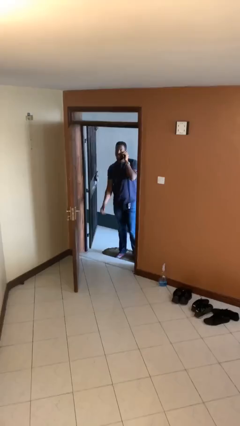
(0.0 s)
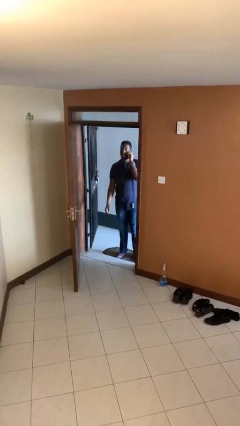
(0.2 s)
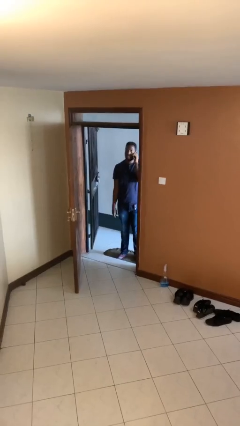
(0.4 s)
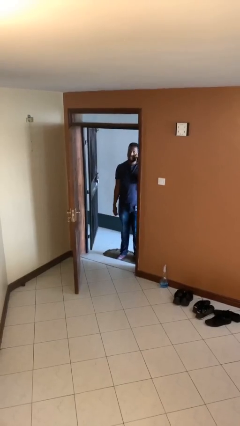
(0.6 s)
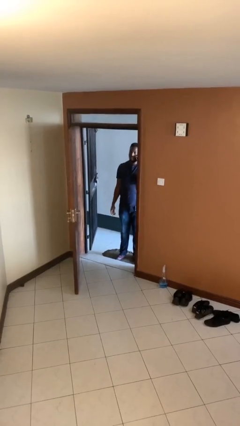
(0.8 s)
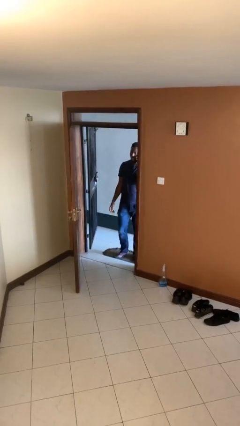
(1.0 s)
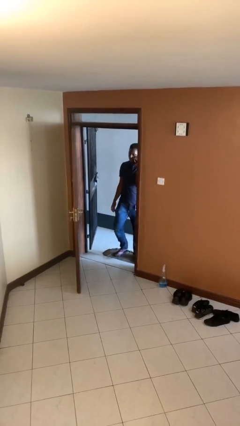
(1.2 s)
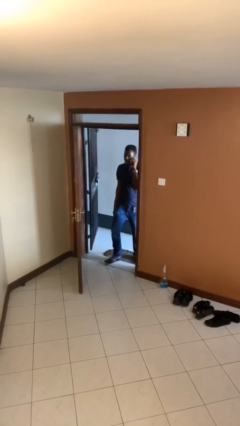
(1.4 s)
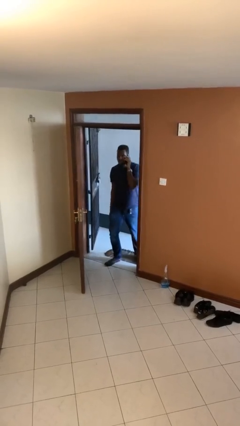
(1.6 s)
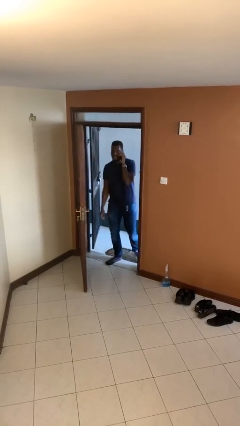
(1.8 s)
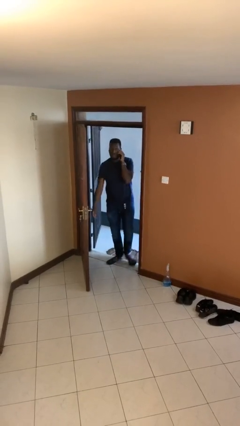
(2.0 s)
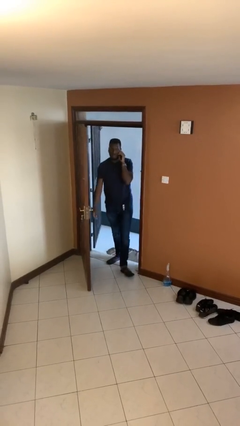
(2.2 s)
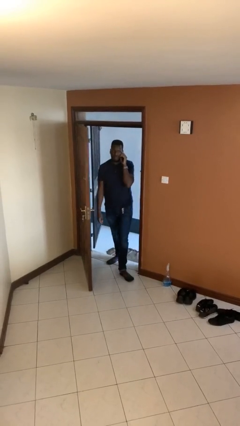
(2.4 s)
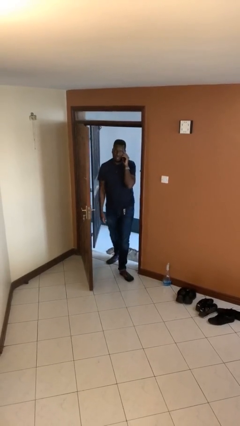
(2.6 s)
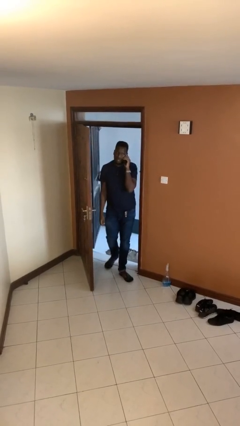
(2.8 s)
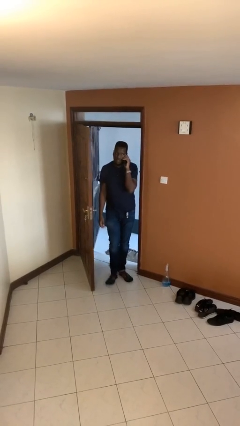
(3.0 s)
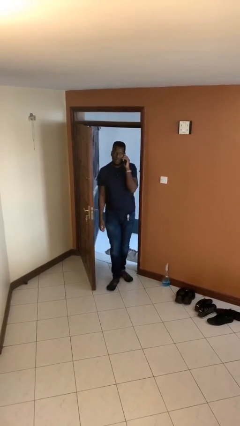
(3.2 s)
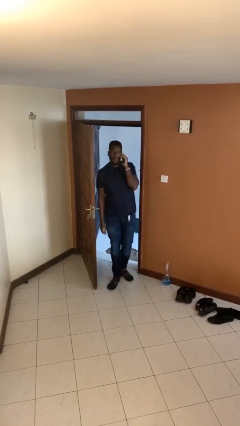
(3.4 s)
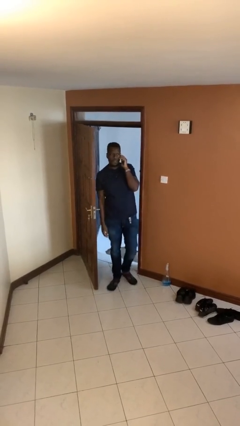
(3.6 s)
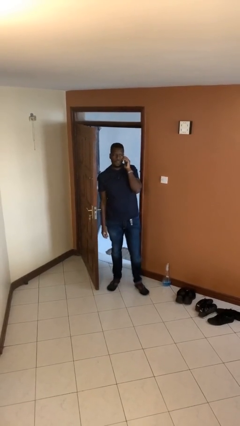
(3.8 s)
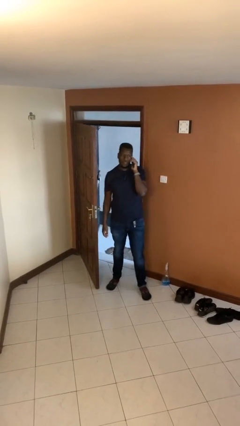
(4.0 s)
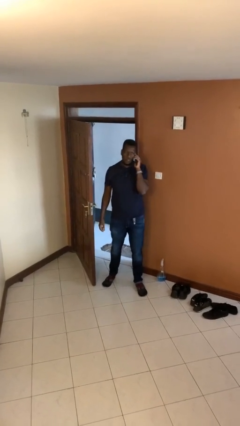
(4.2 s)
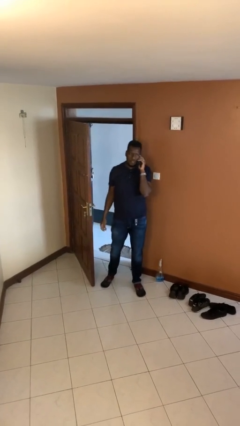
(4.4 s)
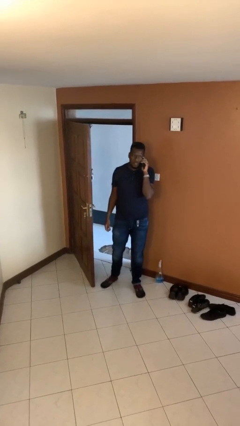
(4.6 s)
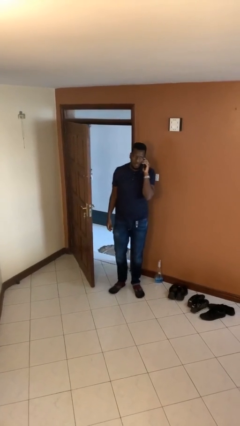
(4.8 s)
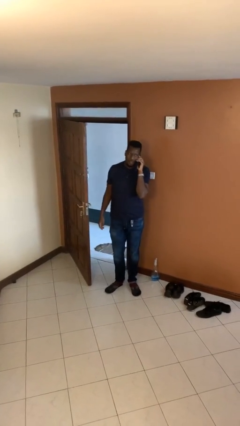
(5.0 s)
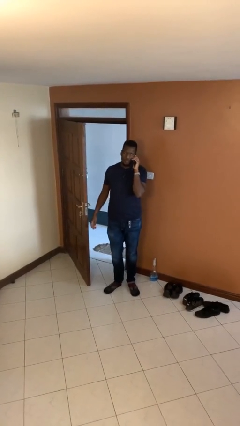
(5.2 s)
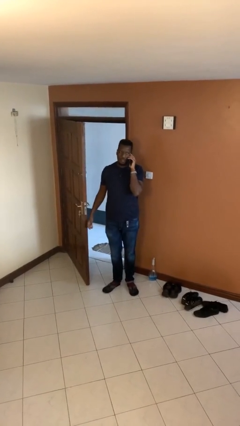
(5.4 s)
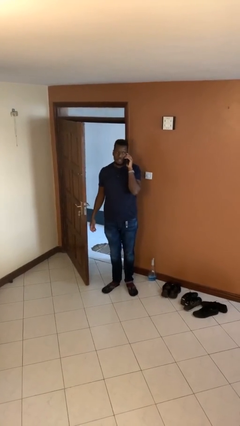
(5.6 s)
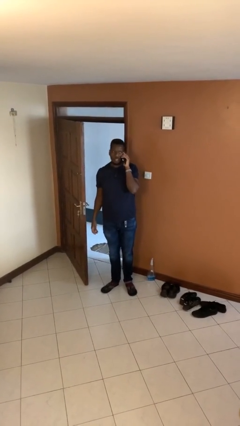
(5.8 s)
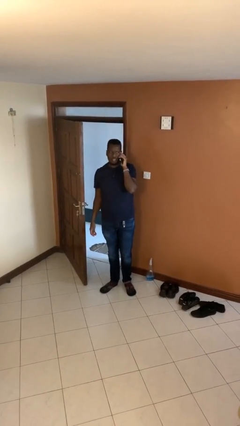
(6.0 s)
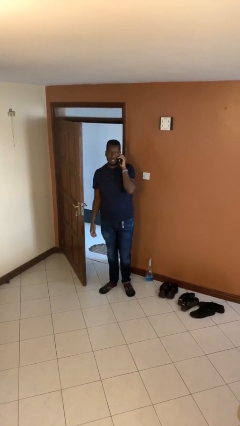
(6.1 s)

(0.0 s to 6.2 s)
person enters scene through structure

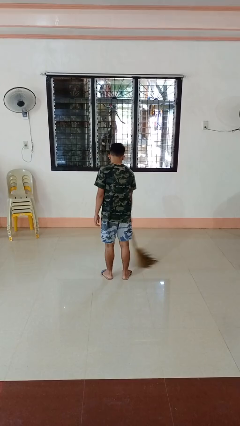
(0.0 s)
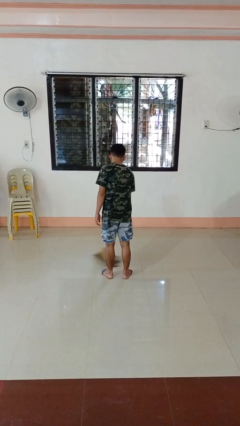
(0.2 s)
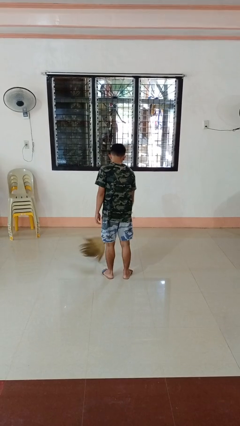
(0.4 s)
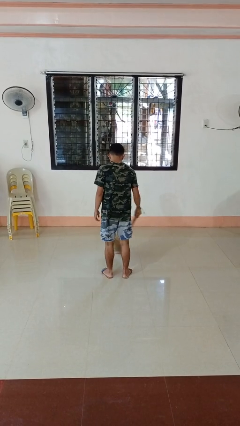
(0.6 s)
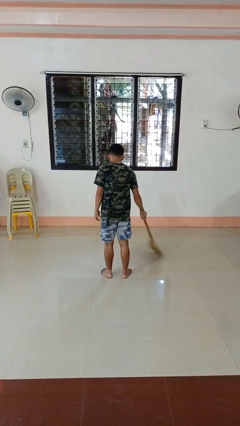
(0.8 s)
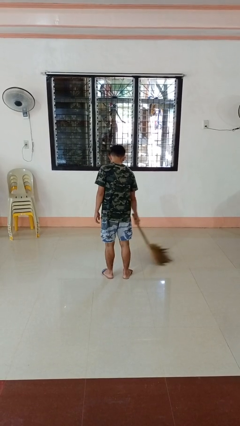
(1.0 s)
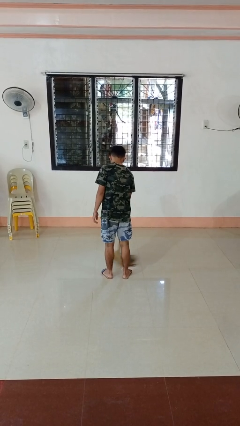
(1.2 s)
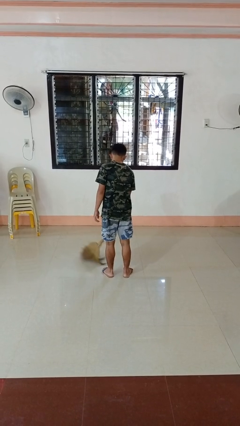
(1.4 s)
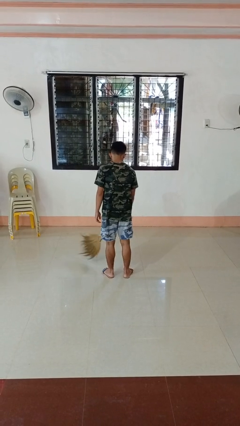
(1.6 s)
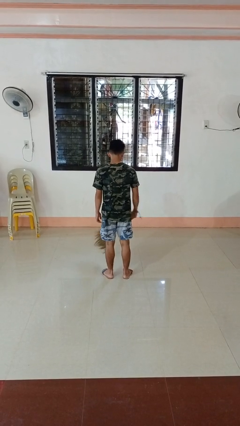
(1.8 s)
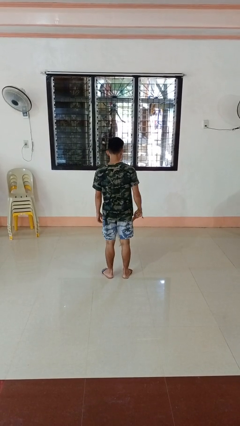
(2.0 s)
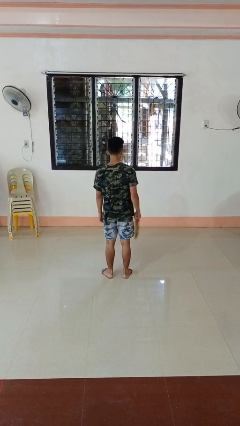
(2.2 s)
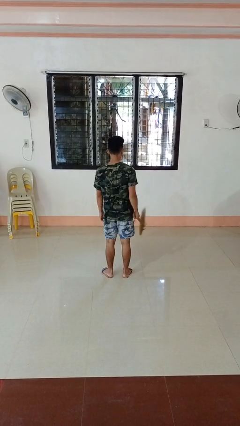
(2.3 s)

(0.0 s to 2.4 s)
person sweeps floor

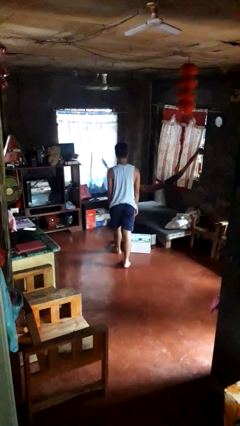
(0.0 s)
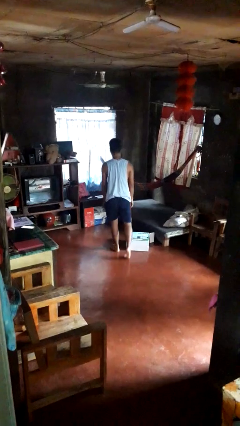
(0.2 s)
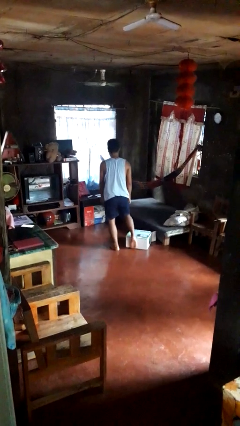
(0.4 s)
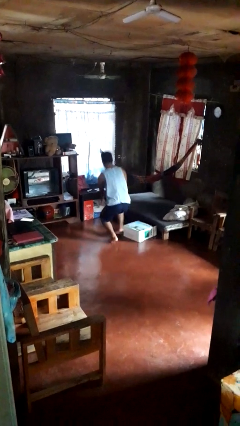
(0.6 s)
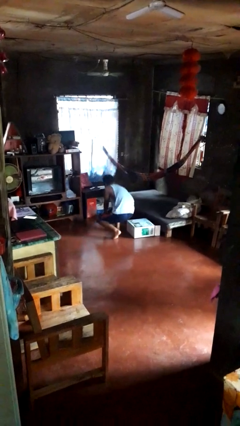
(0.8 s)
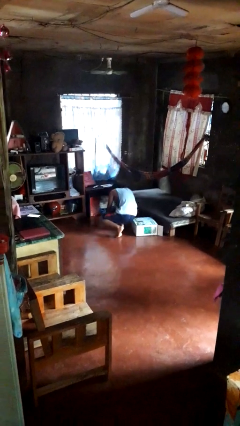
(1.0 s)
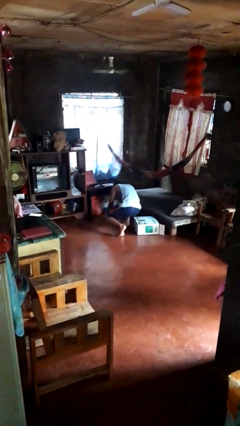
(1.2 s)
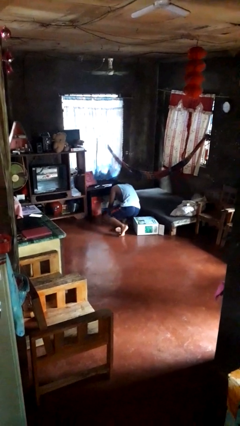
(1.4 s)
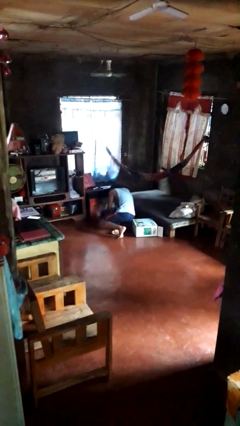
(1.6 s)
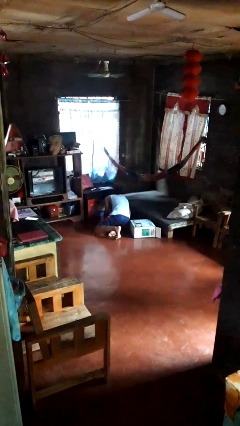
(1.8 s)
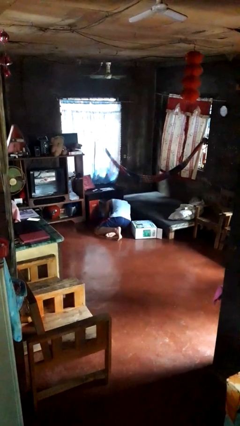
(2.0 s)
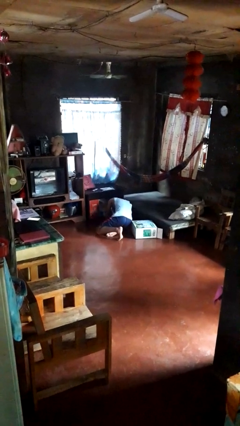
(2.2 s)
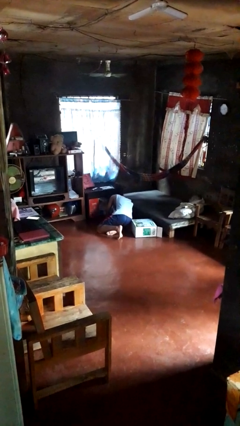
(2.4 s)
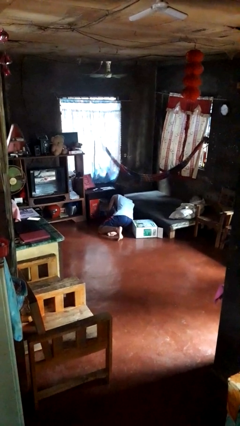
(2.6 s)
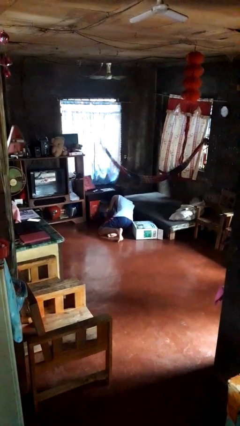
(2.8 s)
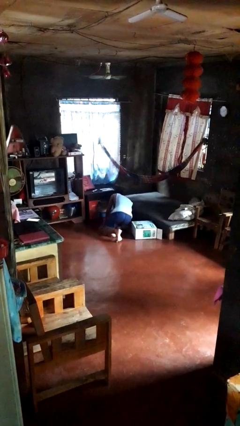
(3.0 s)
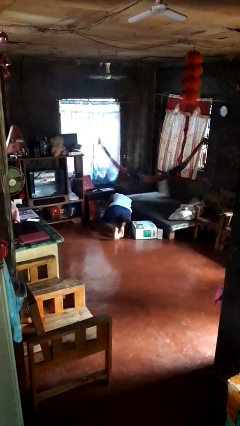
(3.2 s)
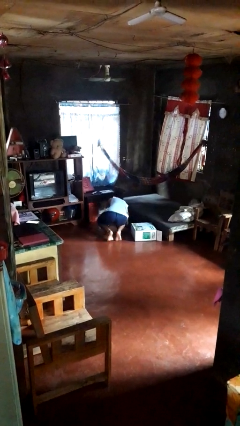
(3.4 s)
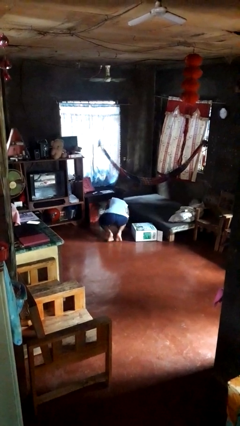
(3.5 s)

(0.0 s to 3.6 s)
person trips on object on floor

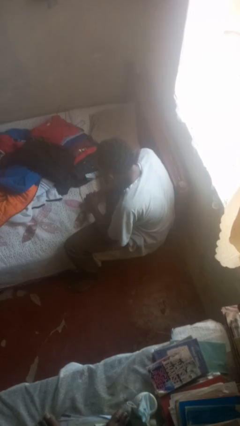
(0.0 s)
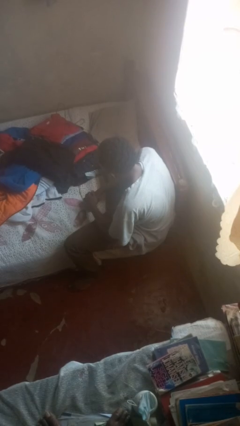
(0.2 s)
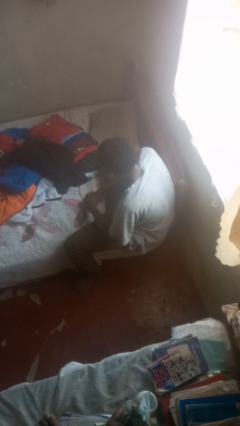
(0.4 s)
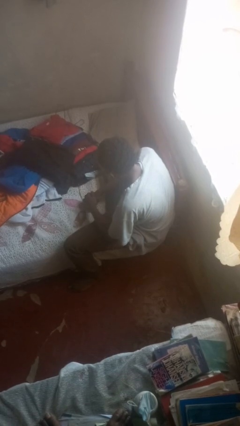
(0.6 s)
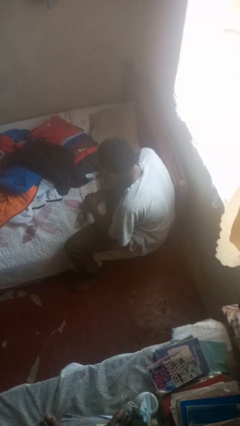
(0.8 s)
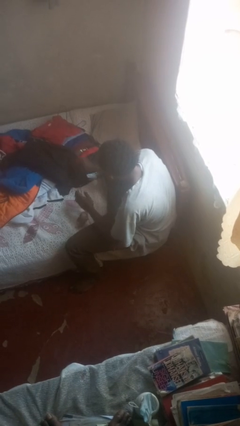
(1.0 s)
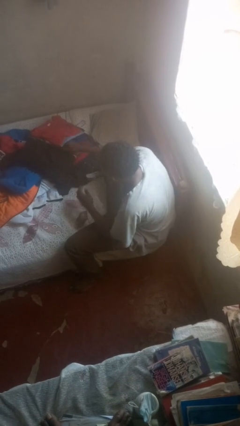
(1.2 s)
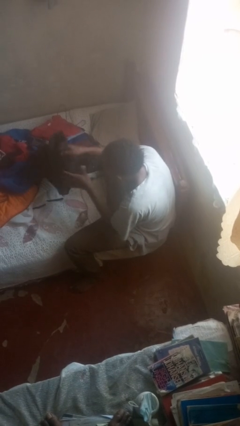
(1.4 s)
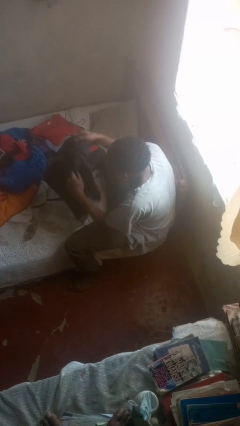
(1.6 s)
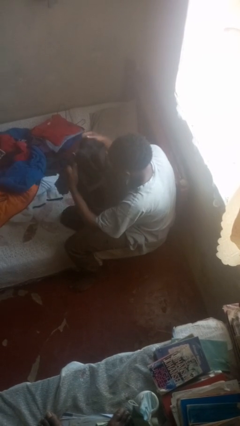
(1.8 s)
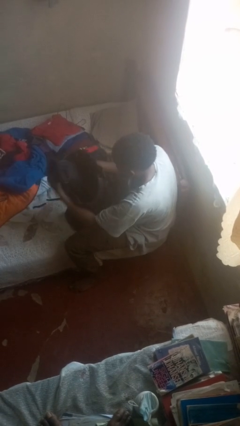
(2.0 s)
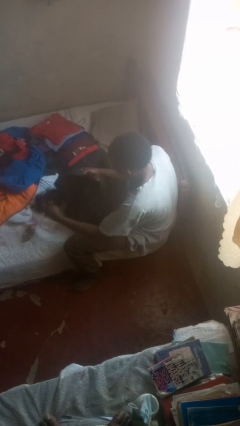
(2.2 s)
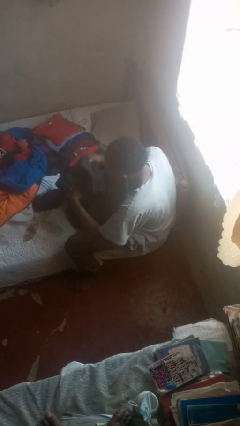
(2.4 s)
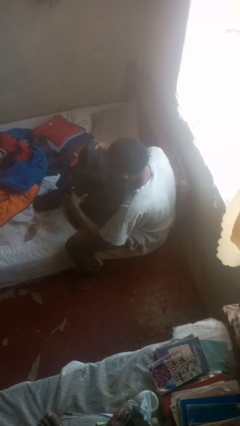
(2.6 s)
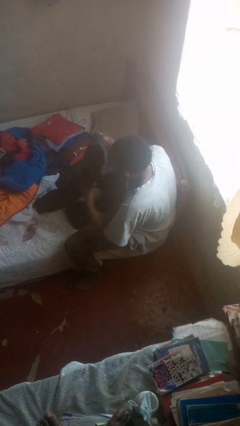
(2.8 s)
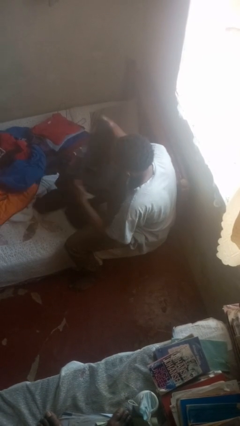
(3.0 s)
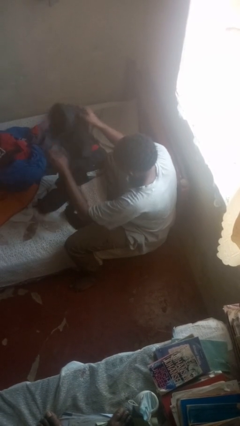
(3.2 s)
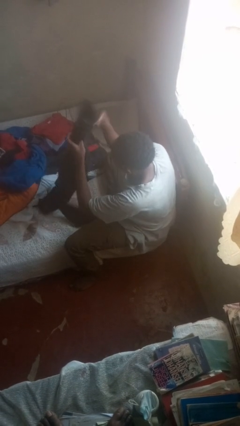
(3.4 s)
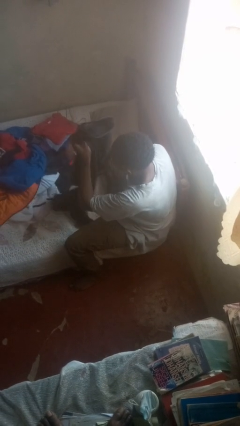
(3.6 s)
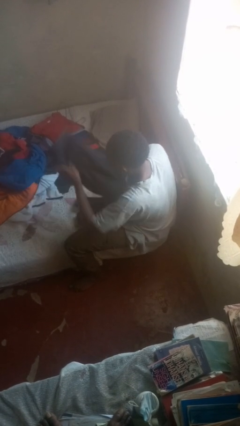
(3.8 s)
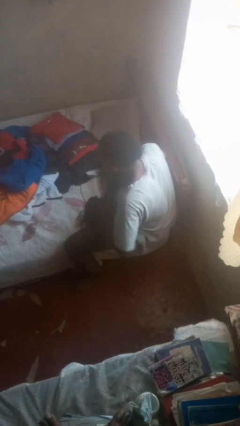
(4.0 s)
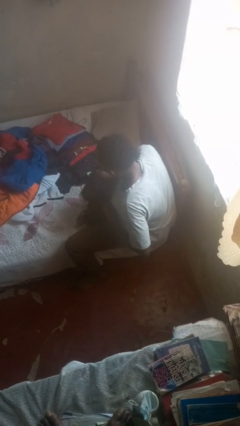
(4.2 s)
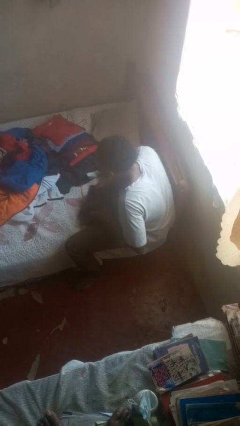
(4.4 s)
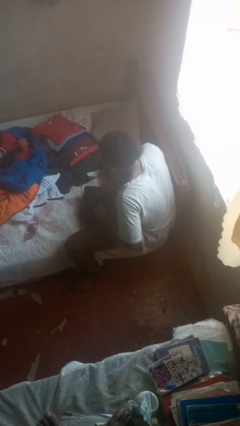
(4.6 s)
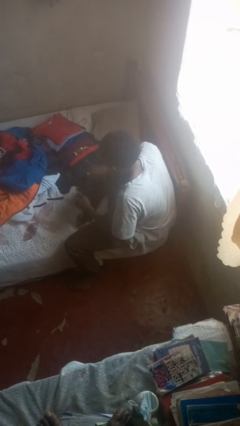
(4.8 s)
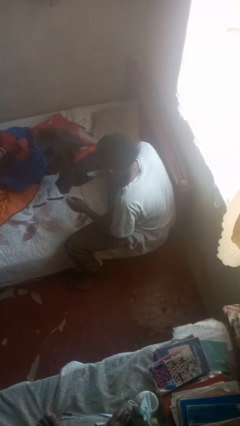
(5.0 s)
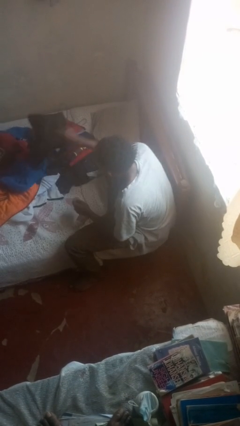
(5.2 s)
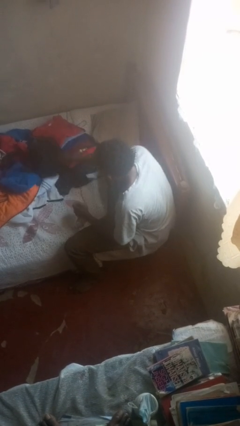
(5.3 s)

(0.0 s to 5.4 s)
person folds pants
